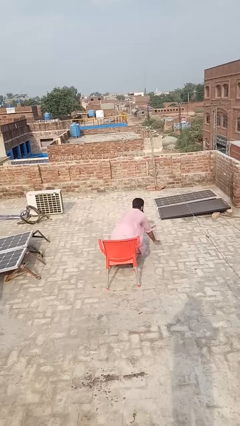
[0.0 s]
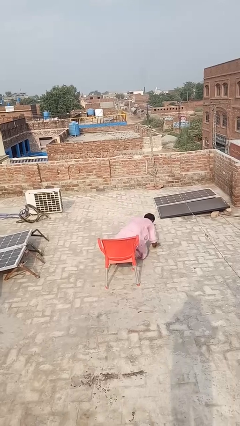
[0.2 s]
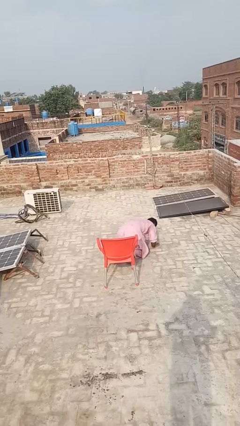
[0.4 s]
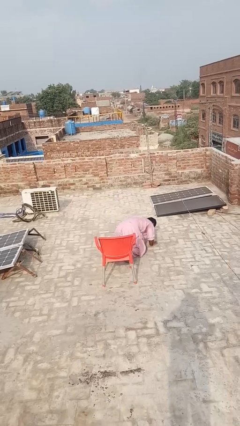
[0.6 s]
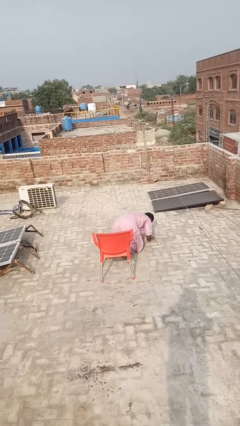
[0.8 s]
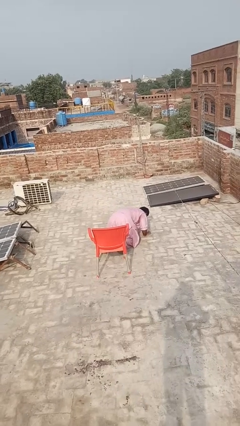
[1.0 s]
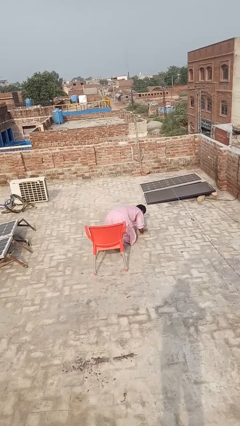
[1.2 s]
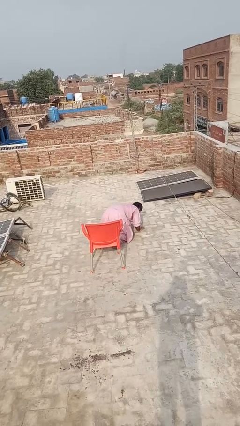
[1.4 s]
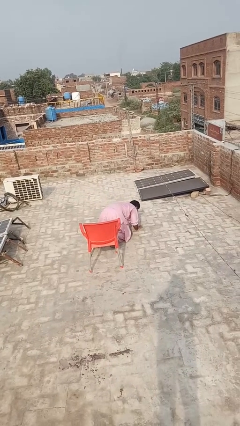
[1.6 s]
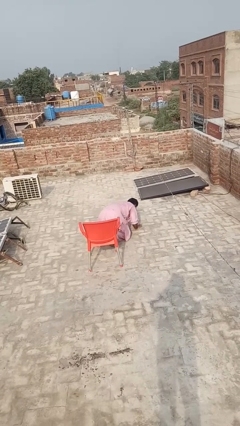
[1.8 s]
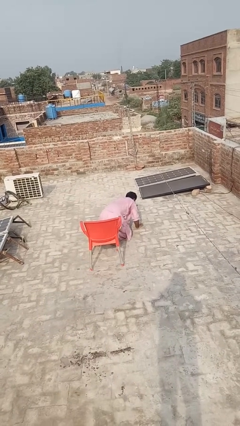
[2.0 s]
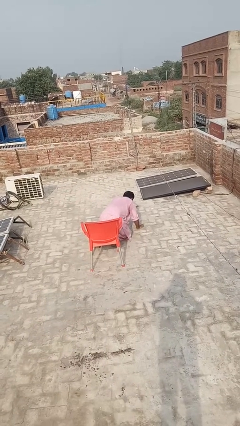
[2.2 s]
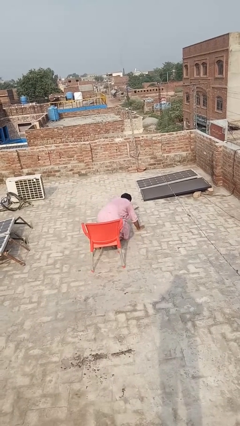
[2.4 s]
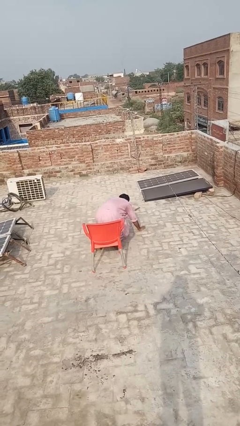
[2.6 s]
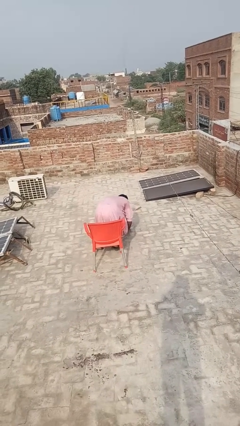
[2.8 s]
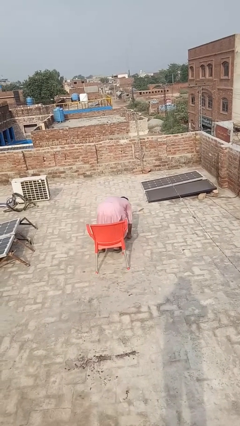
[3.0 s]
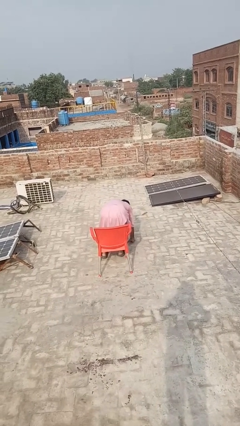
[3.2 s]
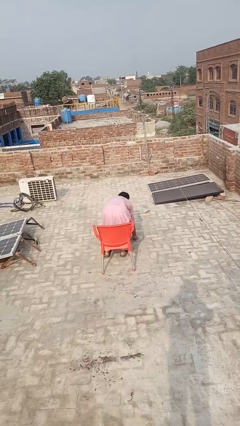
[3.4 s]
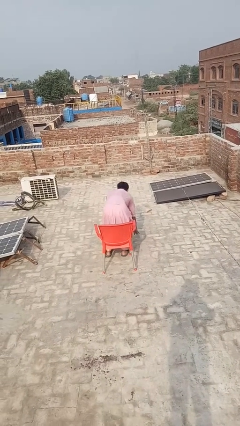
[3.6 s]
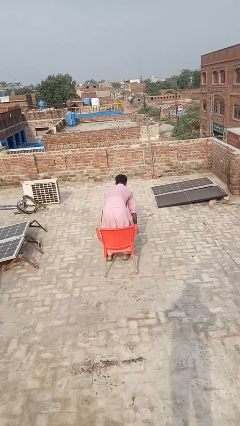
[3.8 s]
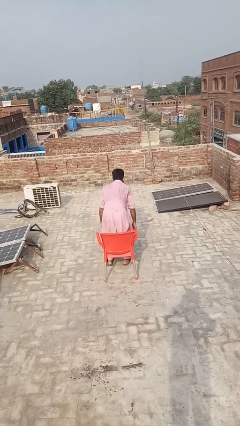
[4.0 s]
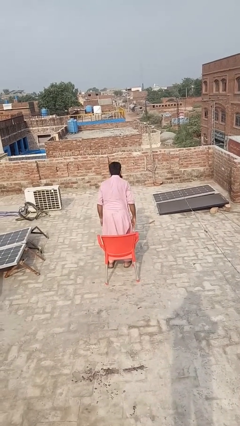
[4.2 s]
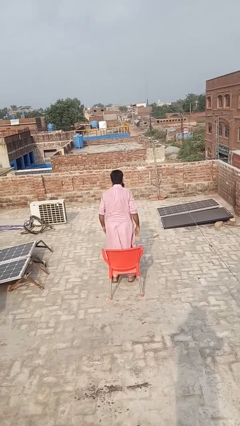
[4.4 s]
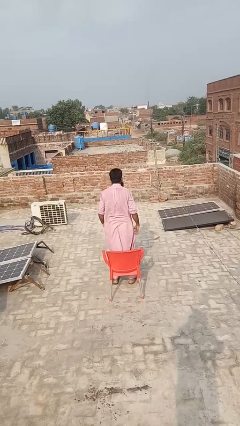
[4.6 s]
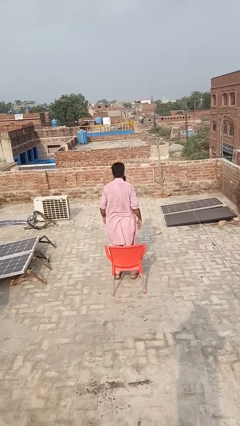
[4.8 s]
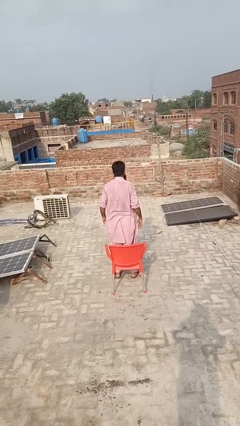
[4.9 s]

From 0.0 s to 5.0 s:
person stands up from floor

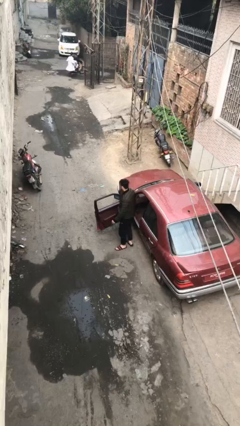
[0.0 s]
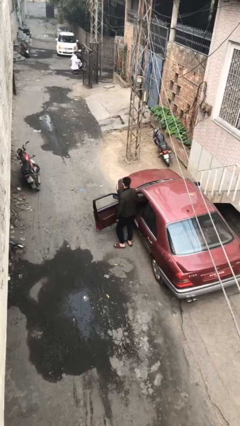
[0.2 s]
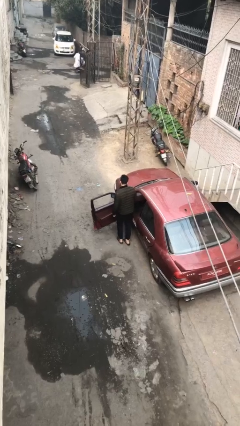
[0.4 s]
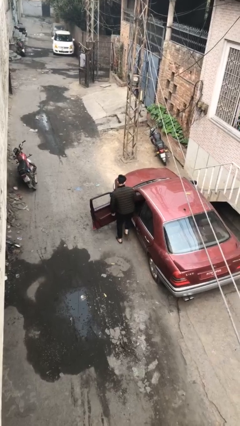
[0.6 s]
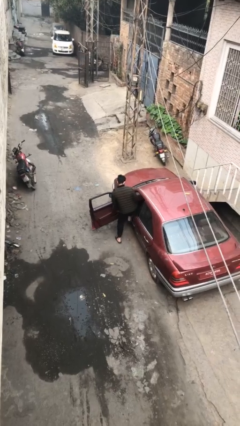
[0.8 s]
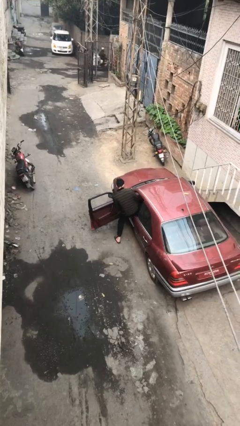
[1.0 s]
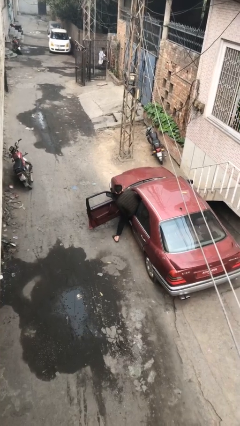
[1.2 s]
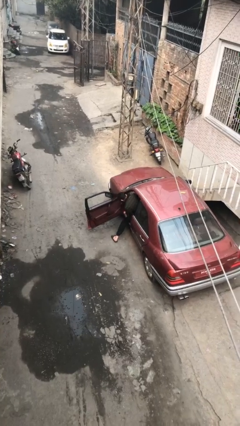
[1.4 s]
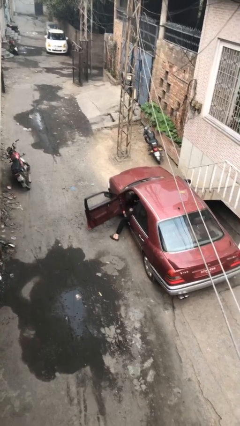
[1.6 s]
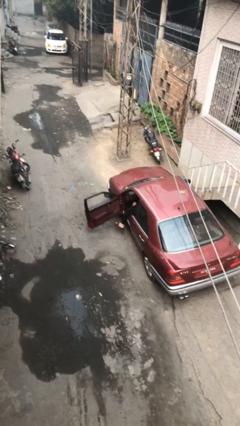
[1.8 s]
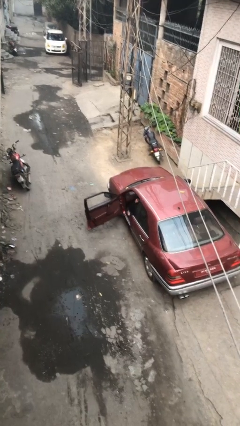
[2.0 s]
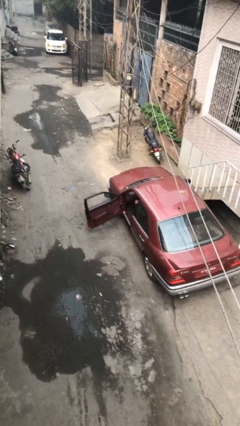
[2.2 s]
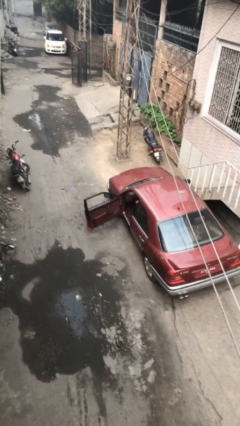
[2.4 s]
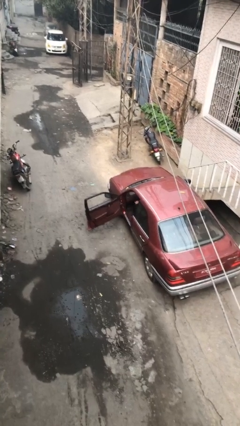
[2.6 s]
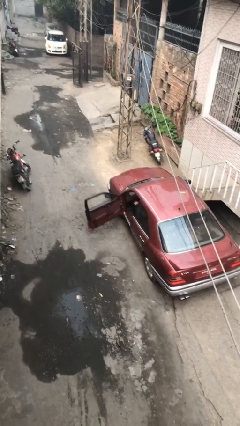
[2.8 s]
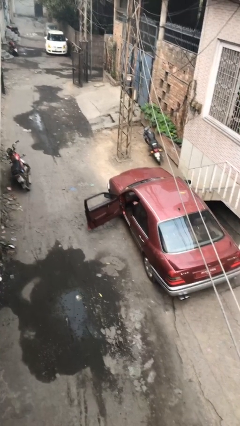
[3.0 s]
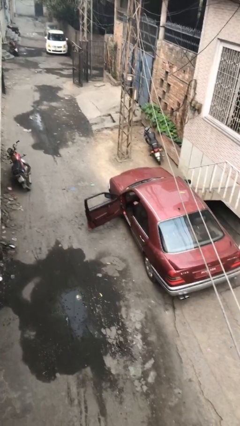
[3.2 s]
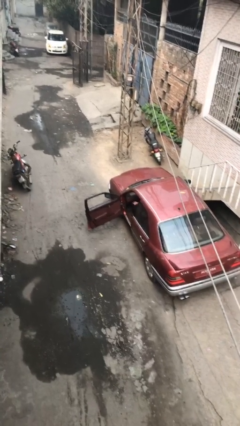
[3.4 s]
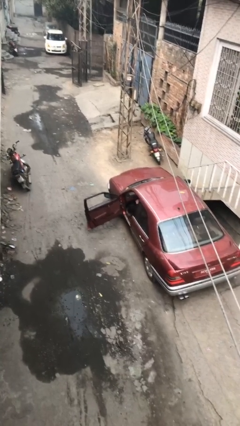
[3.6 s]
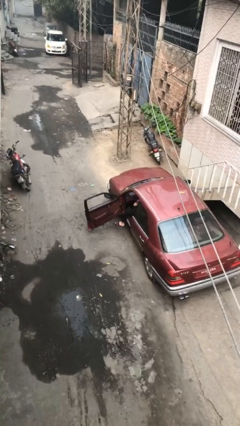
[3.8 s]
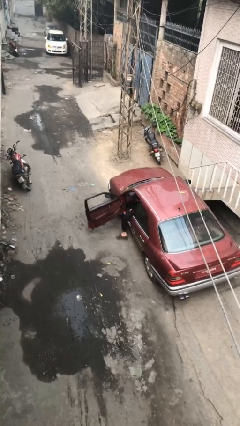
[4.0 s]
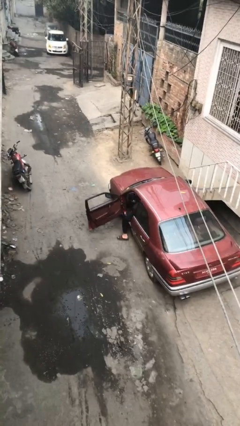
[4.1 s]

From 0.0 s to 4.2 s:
person enters car

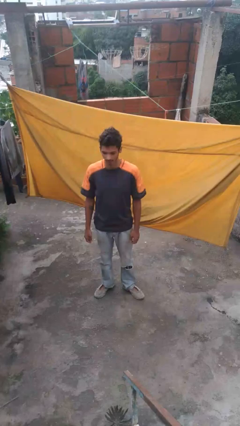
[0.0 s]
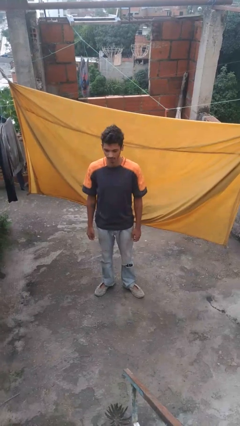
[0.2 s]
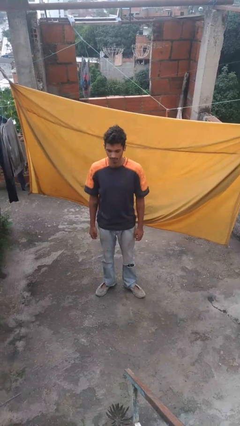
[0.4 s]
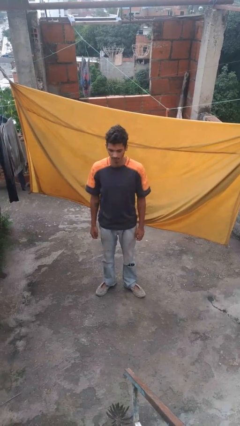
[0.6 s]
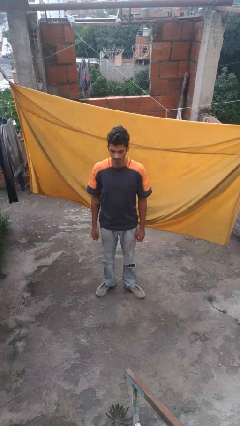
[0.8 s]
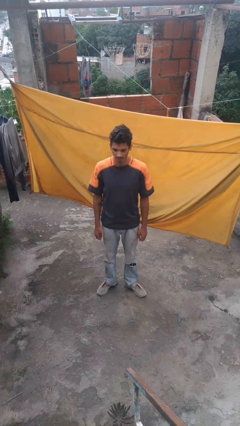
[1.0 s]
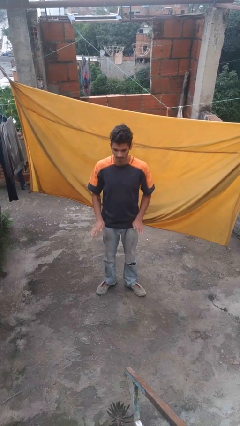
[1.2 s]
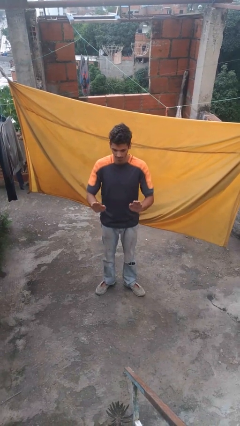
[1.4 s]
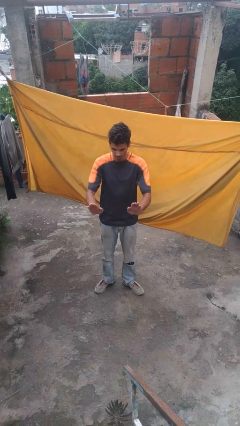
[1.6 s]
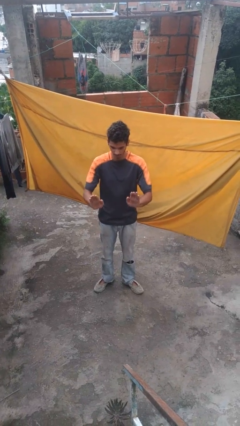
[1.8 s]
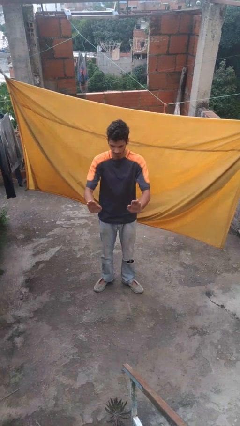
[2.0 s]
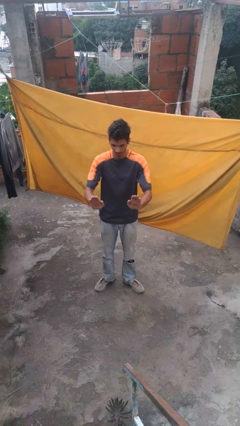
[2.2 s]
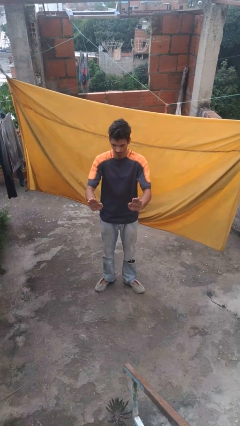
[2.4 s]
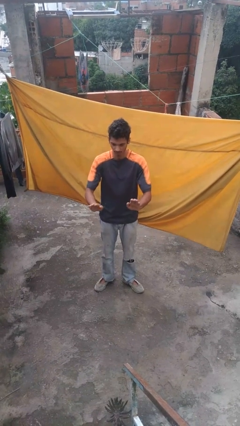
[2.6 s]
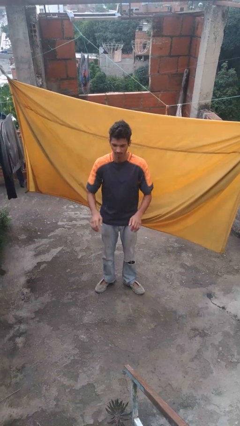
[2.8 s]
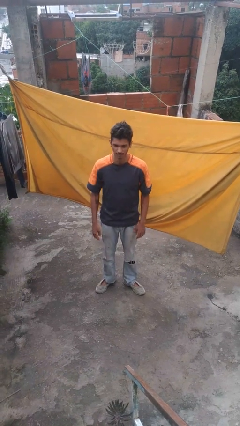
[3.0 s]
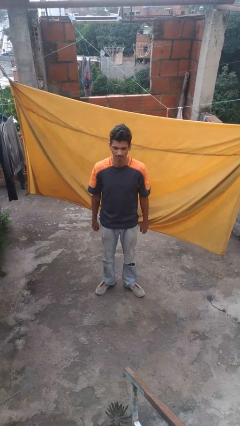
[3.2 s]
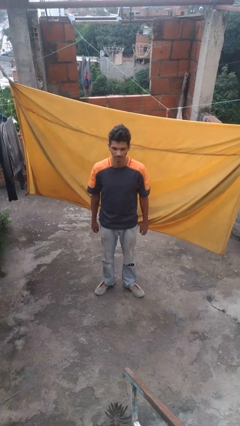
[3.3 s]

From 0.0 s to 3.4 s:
person gestures stop

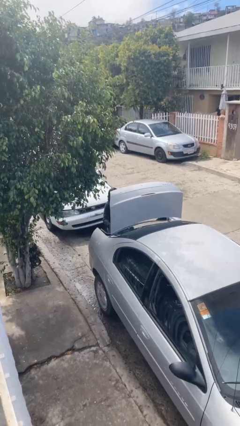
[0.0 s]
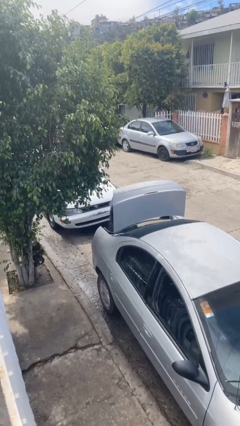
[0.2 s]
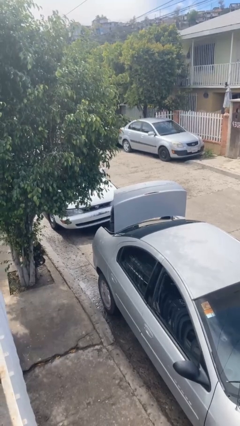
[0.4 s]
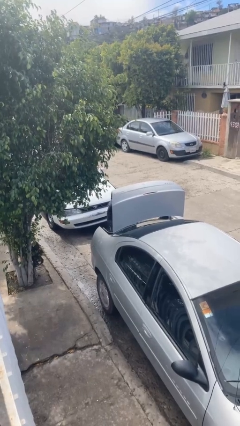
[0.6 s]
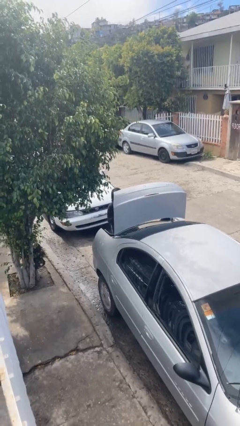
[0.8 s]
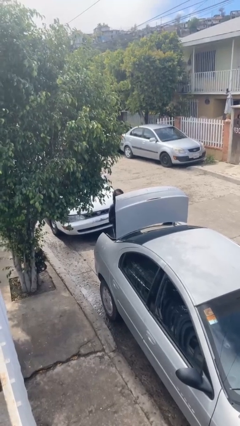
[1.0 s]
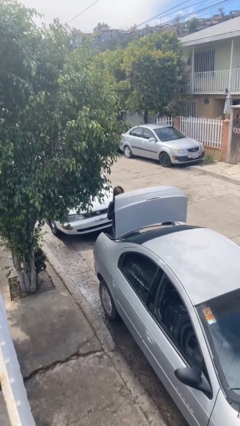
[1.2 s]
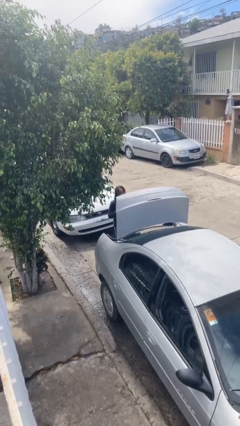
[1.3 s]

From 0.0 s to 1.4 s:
person unloads car

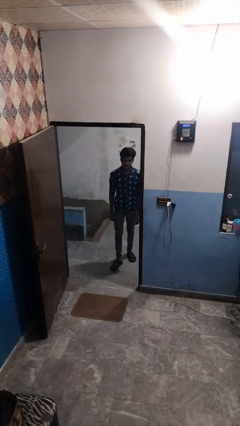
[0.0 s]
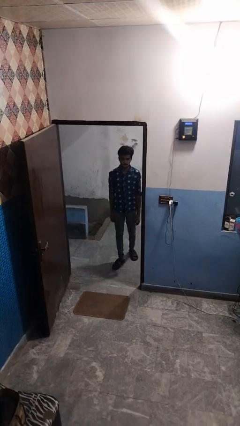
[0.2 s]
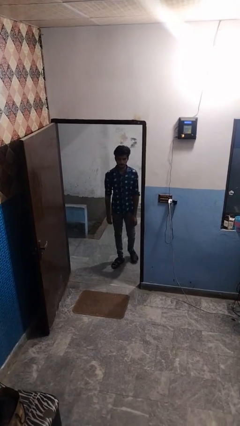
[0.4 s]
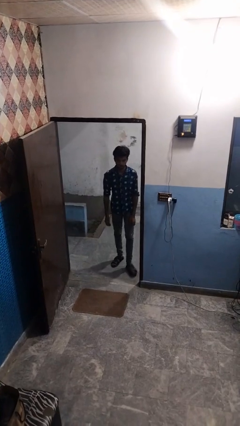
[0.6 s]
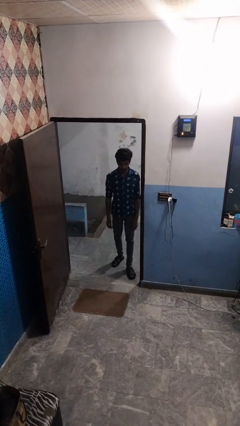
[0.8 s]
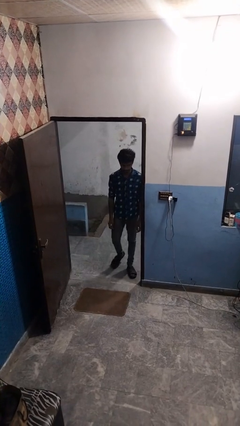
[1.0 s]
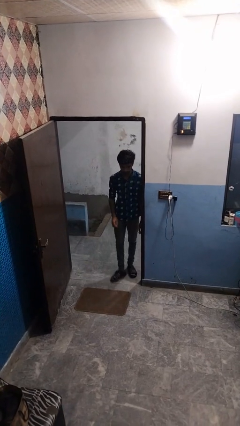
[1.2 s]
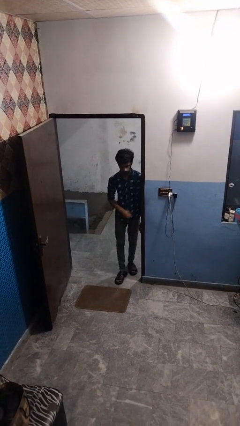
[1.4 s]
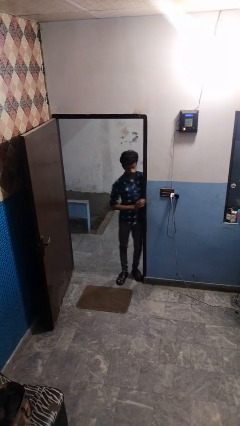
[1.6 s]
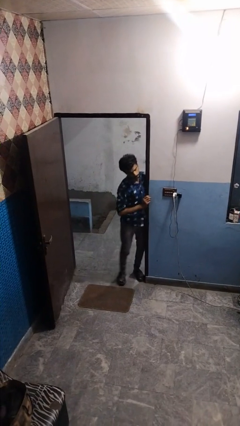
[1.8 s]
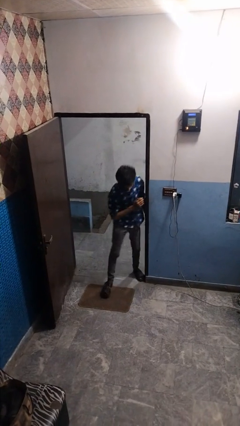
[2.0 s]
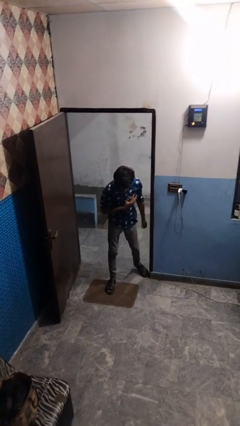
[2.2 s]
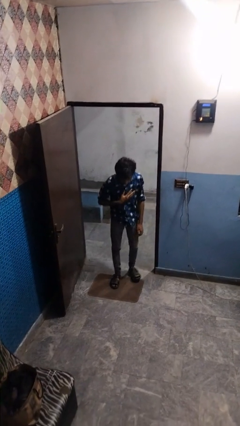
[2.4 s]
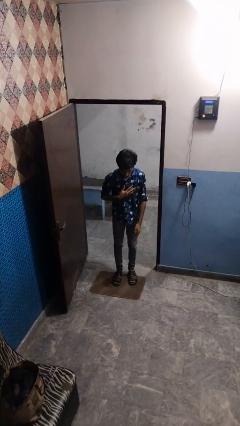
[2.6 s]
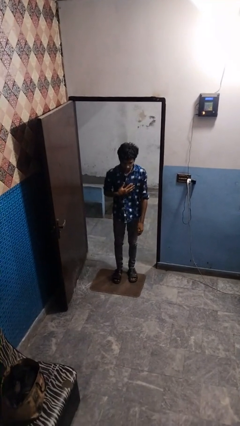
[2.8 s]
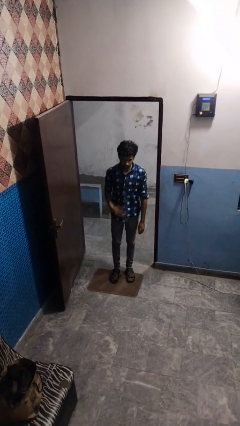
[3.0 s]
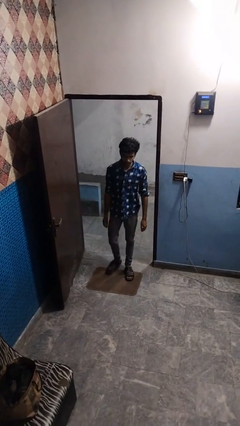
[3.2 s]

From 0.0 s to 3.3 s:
person bumps into wall

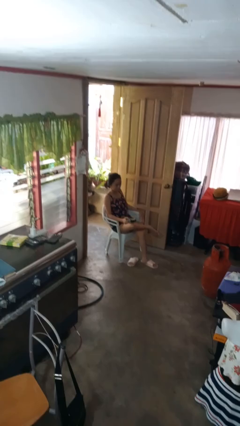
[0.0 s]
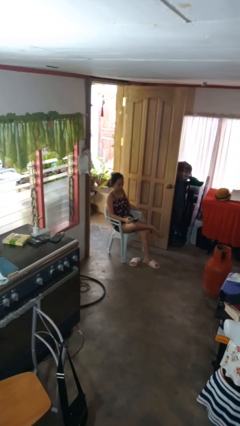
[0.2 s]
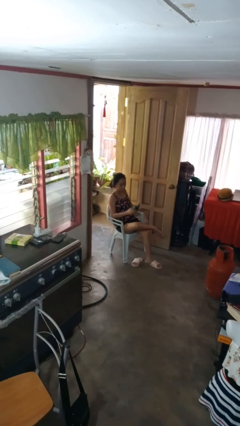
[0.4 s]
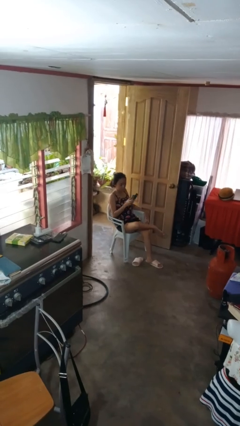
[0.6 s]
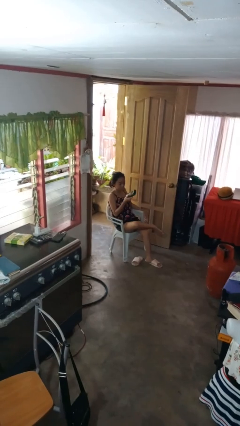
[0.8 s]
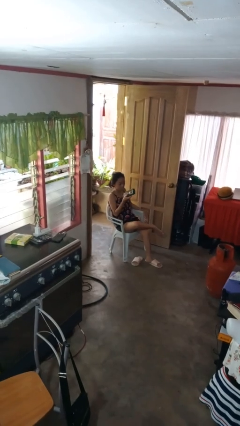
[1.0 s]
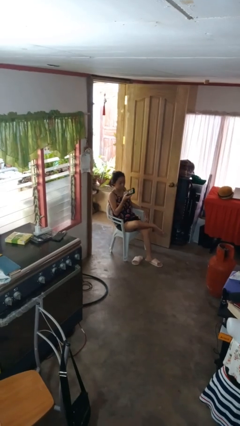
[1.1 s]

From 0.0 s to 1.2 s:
person uses television remote
